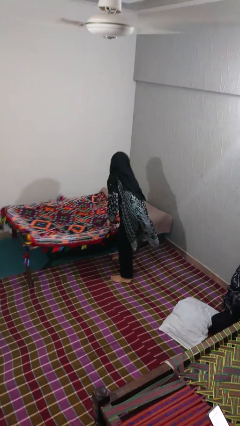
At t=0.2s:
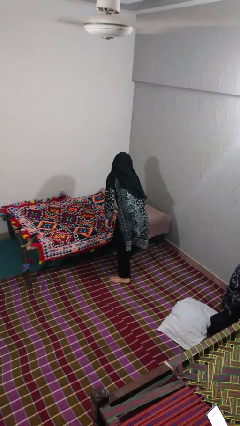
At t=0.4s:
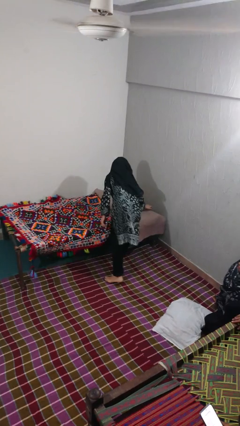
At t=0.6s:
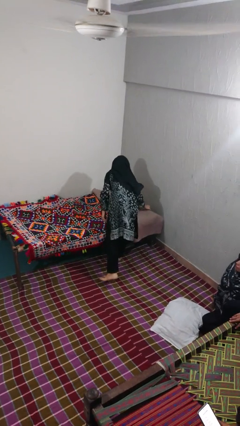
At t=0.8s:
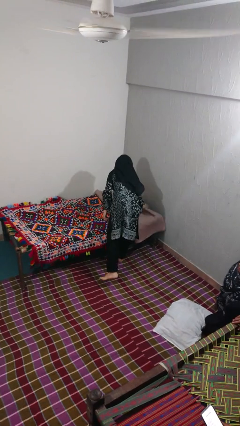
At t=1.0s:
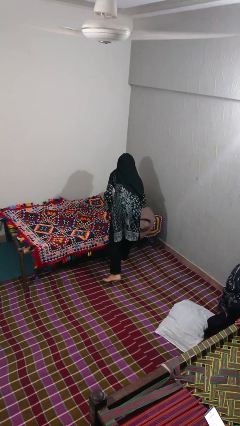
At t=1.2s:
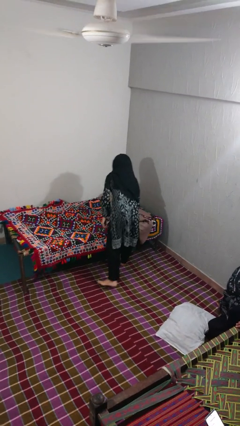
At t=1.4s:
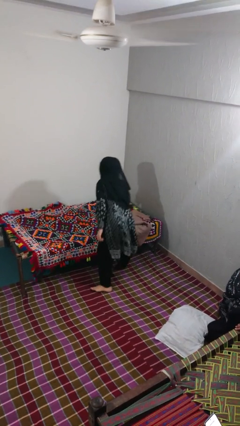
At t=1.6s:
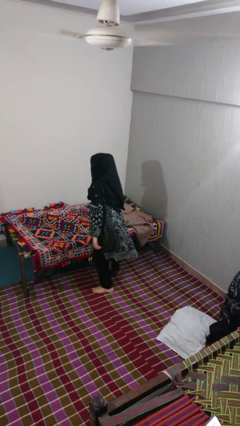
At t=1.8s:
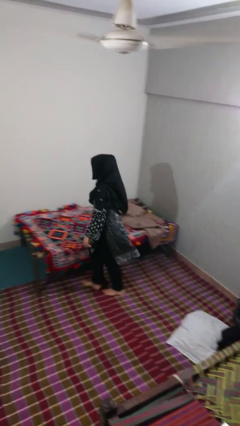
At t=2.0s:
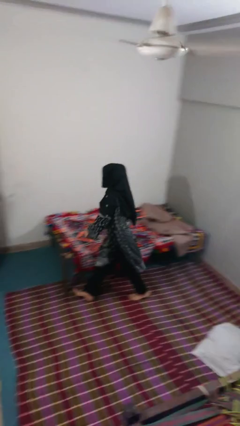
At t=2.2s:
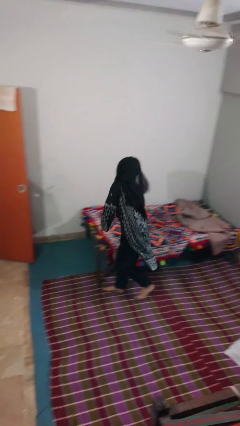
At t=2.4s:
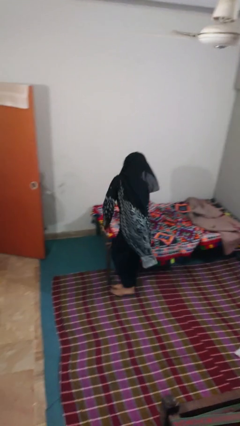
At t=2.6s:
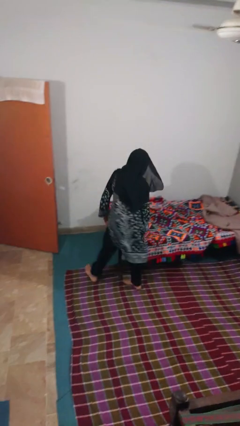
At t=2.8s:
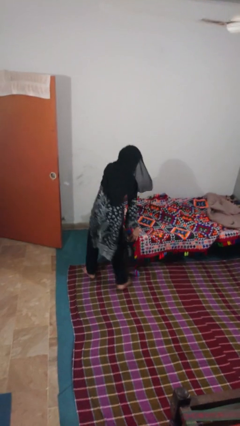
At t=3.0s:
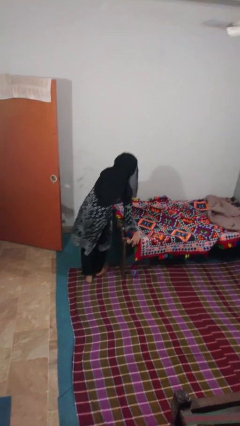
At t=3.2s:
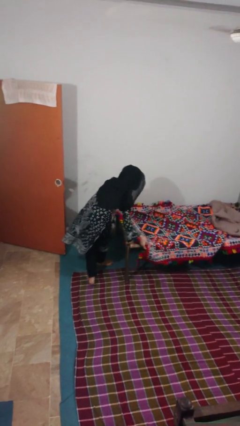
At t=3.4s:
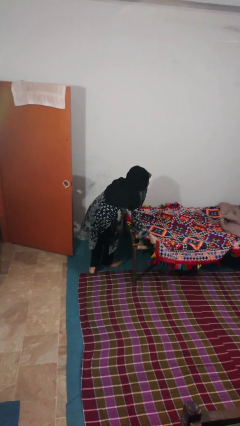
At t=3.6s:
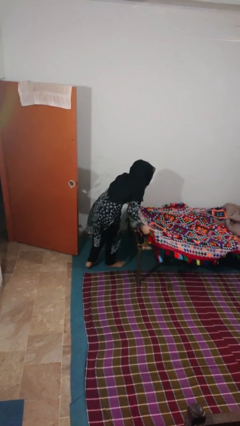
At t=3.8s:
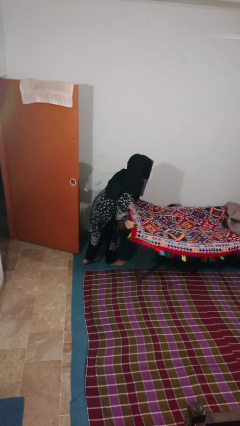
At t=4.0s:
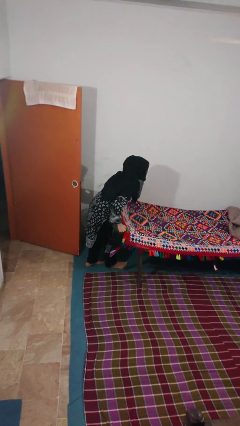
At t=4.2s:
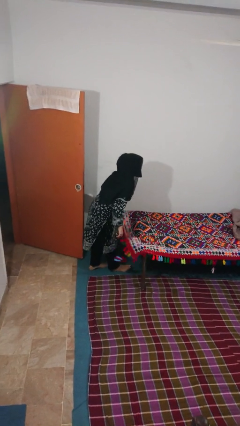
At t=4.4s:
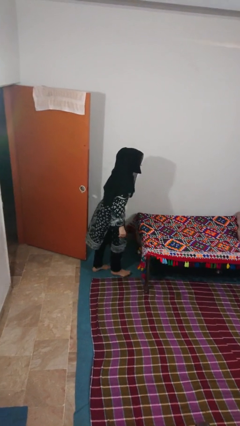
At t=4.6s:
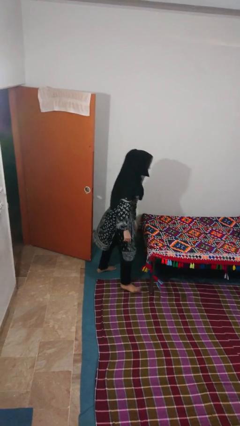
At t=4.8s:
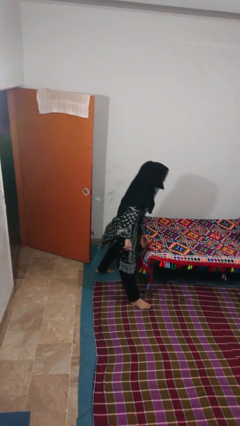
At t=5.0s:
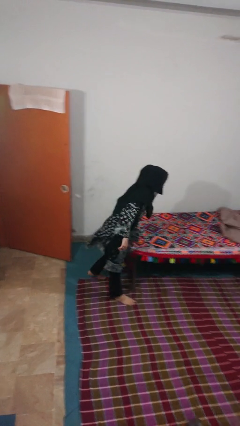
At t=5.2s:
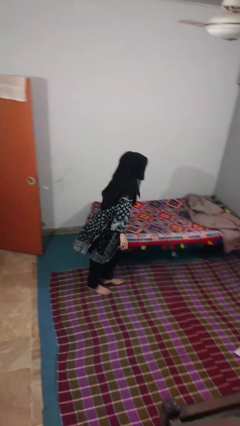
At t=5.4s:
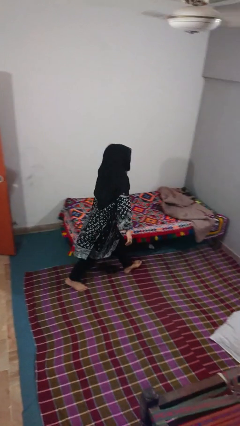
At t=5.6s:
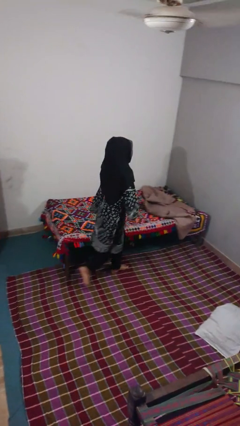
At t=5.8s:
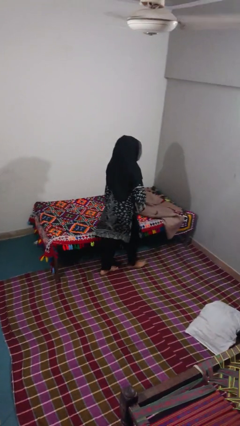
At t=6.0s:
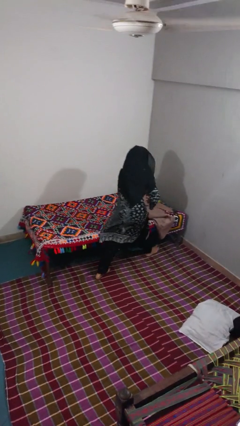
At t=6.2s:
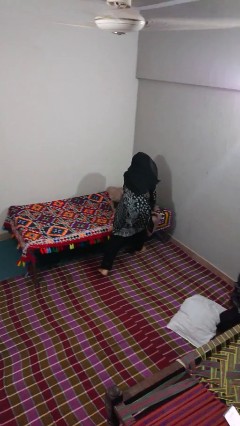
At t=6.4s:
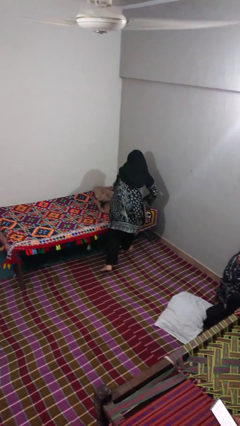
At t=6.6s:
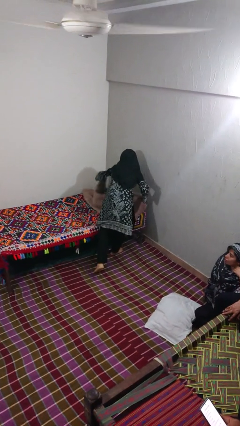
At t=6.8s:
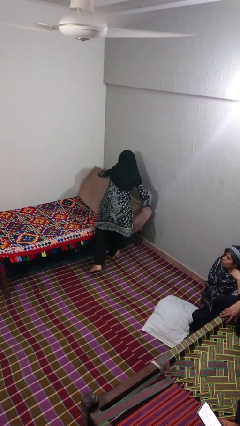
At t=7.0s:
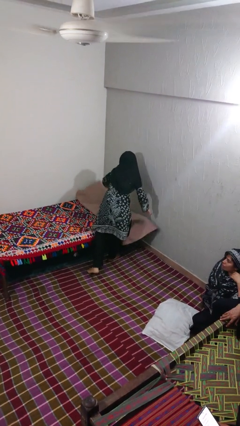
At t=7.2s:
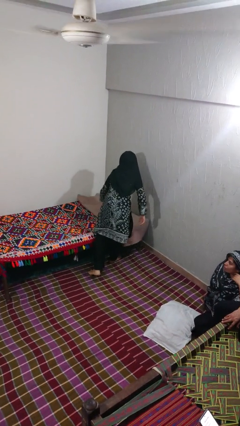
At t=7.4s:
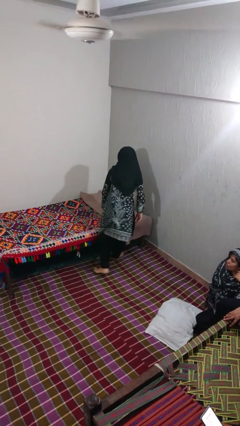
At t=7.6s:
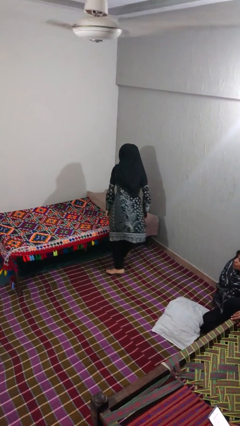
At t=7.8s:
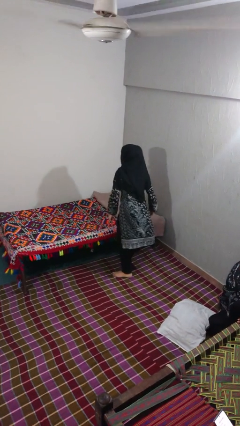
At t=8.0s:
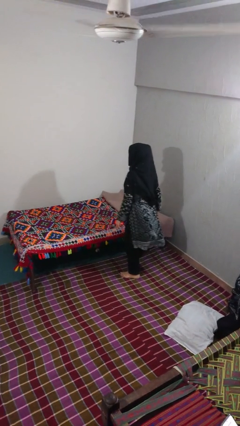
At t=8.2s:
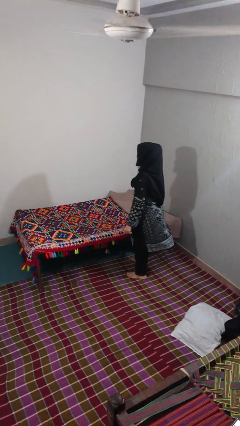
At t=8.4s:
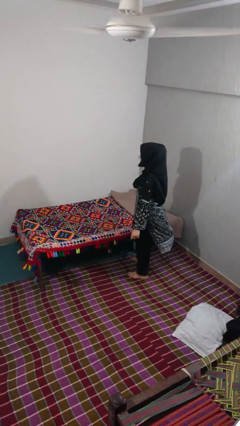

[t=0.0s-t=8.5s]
person makes bed

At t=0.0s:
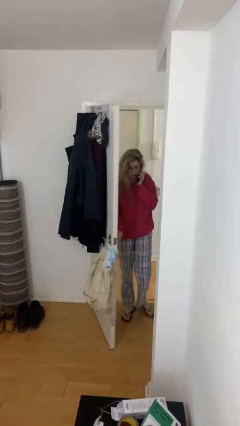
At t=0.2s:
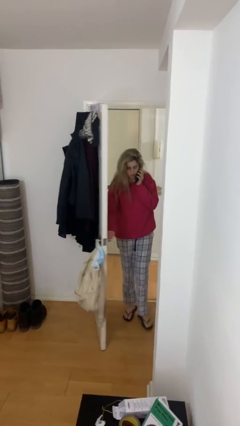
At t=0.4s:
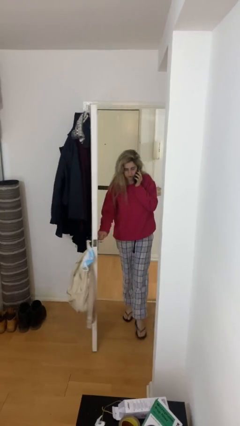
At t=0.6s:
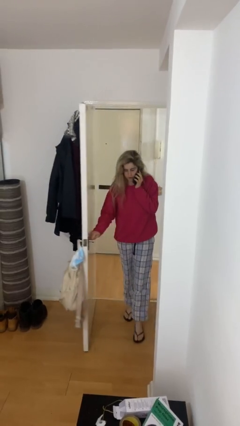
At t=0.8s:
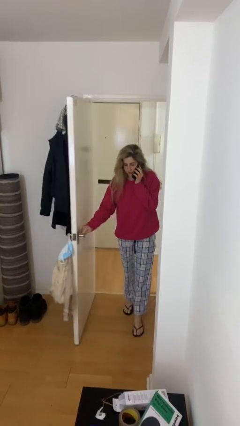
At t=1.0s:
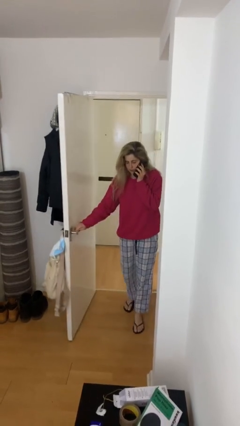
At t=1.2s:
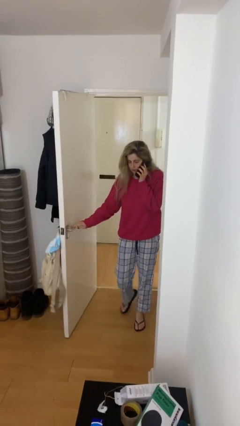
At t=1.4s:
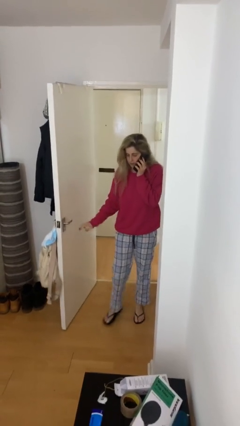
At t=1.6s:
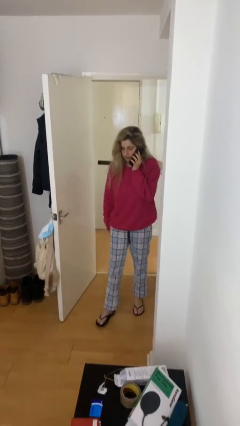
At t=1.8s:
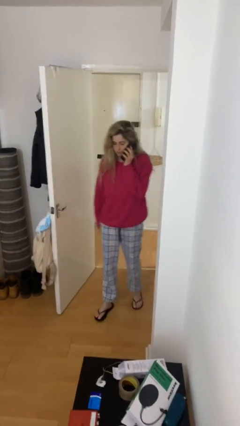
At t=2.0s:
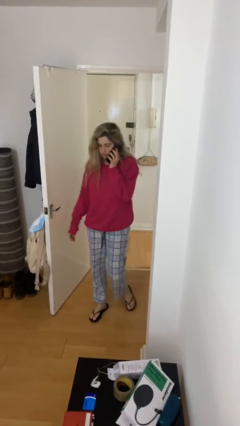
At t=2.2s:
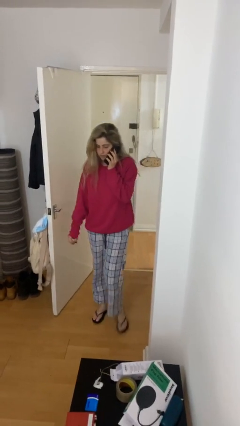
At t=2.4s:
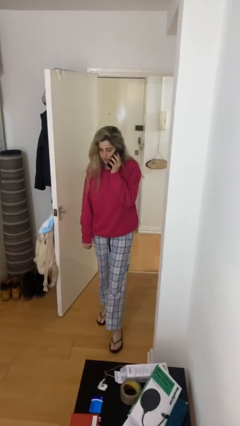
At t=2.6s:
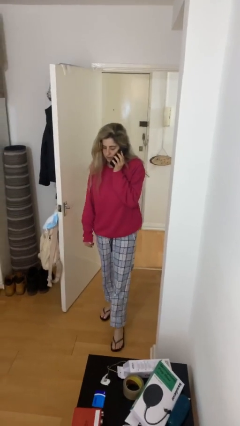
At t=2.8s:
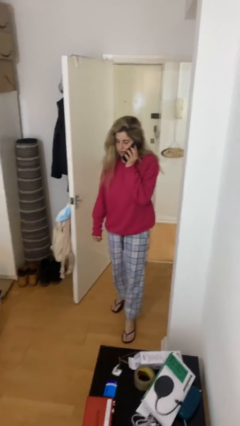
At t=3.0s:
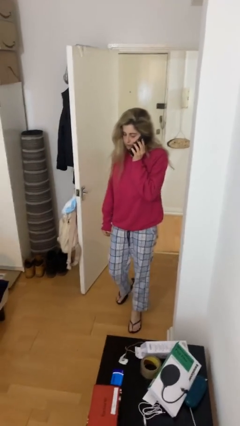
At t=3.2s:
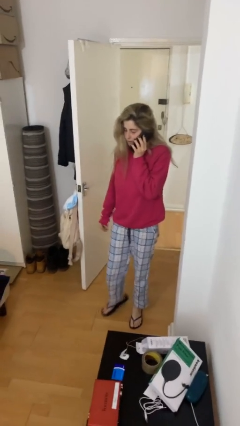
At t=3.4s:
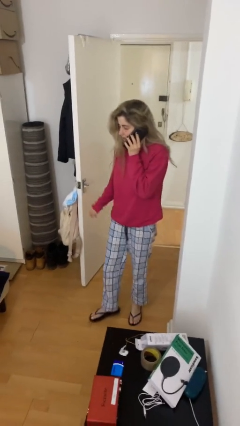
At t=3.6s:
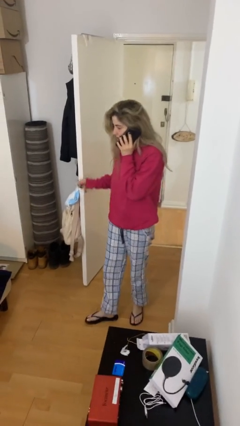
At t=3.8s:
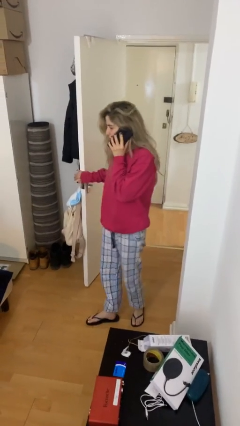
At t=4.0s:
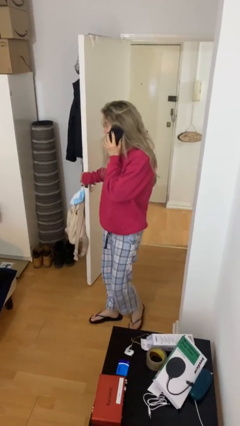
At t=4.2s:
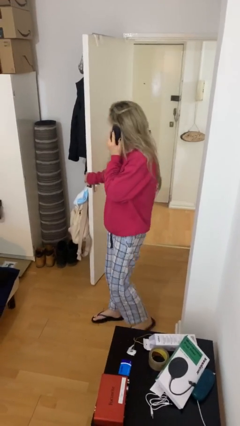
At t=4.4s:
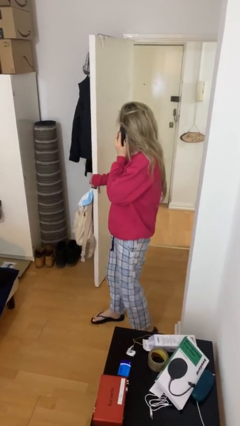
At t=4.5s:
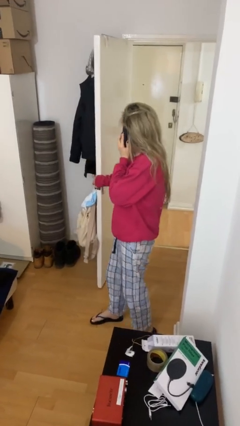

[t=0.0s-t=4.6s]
person enters scene through structure

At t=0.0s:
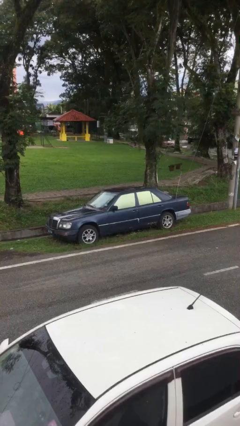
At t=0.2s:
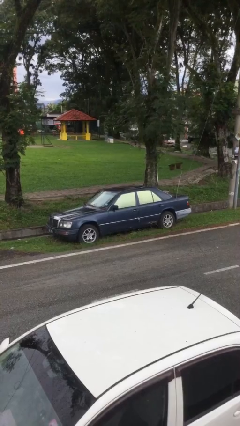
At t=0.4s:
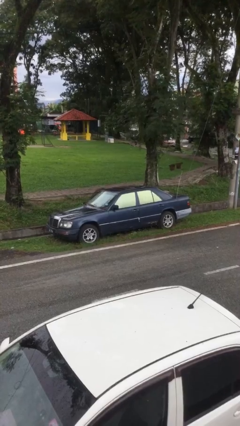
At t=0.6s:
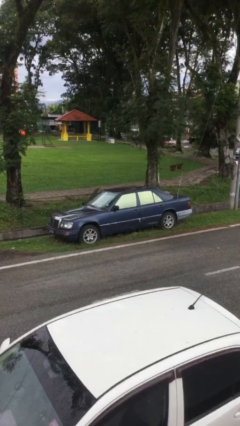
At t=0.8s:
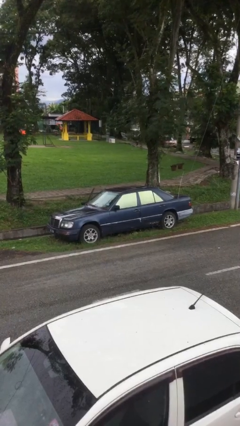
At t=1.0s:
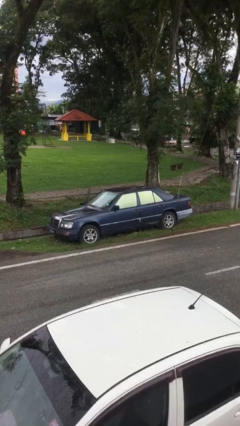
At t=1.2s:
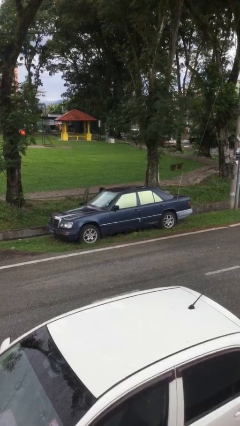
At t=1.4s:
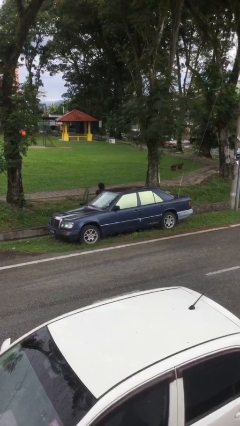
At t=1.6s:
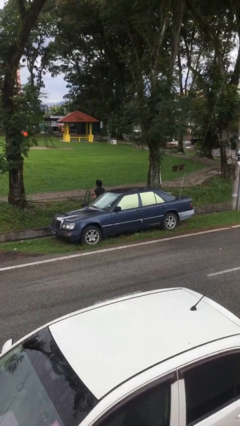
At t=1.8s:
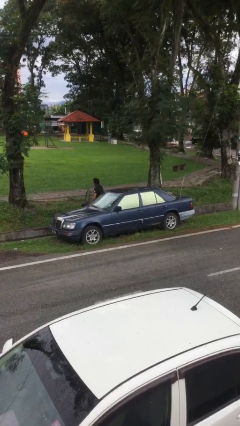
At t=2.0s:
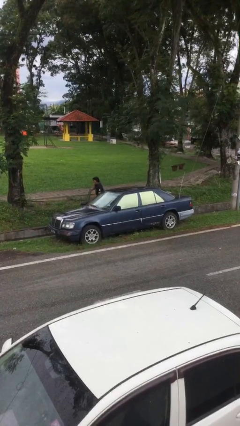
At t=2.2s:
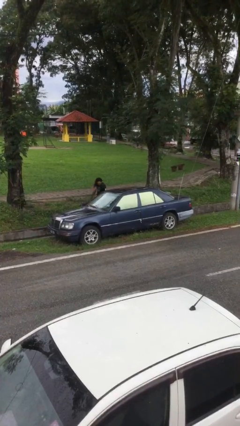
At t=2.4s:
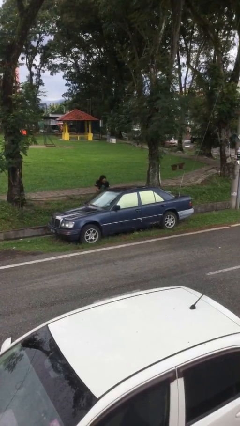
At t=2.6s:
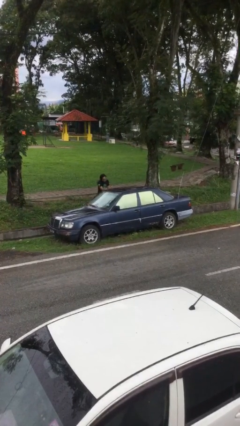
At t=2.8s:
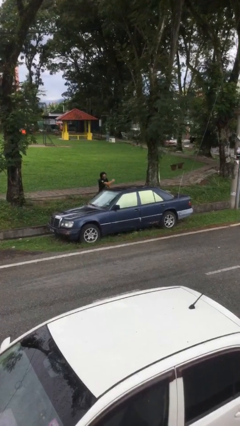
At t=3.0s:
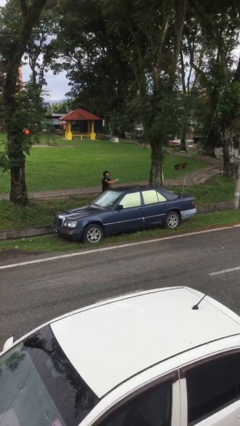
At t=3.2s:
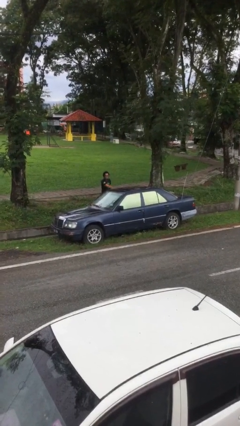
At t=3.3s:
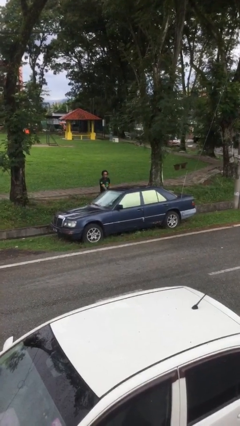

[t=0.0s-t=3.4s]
car drops off person

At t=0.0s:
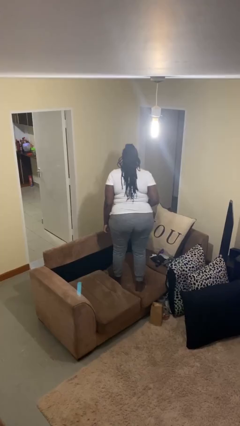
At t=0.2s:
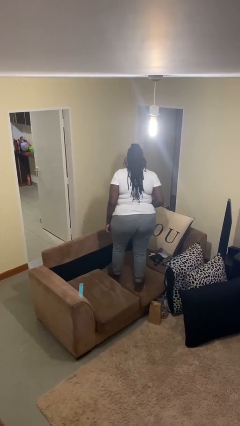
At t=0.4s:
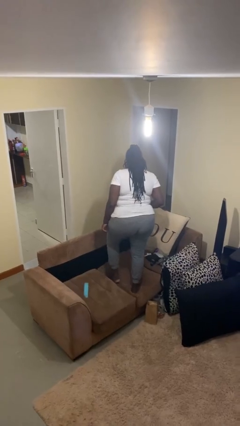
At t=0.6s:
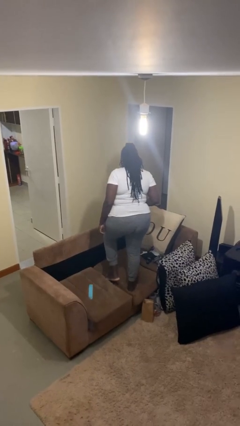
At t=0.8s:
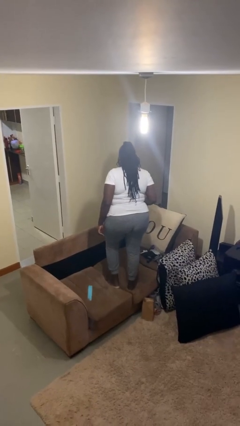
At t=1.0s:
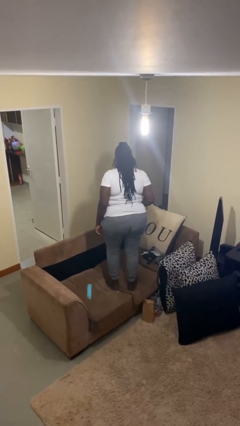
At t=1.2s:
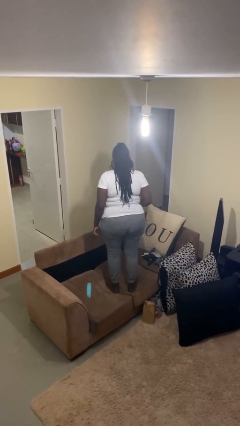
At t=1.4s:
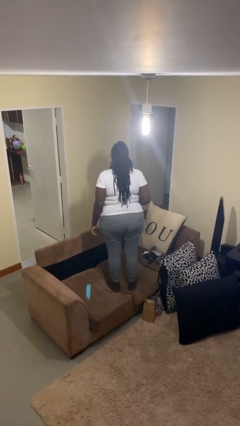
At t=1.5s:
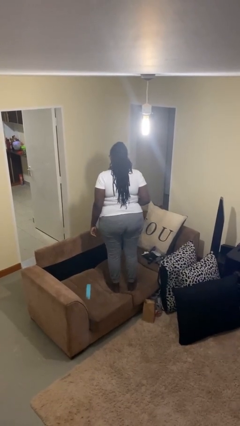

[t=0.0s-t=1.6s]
person jumps on couch
